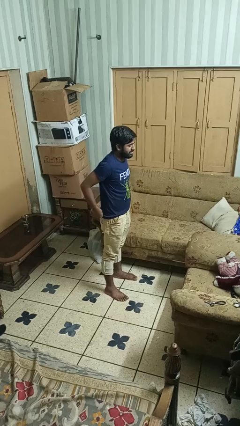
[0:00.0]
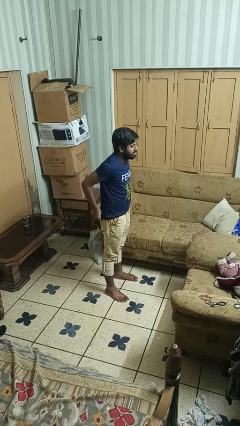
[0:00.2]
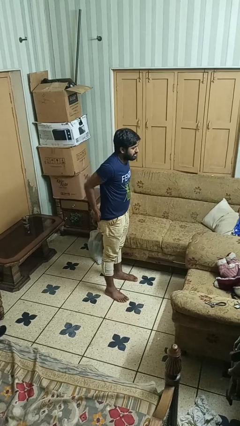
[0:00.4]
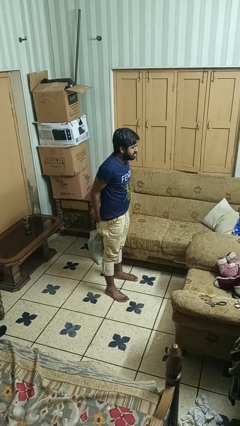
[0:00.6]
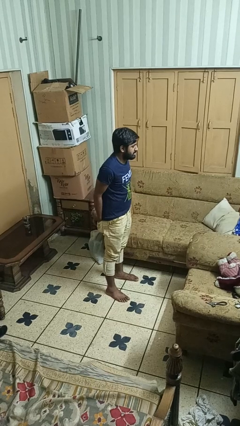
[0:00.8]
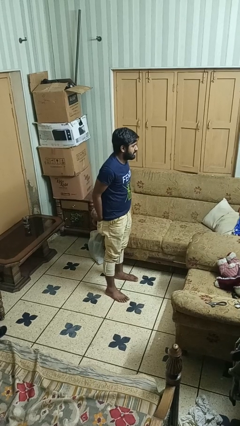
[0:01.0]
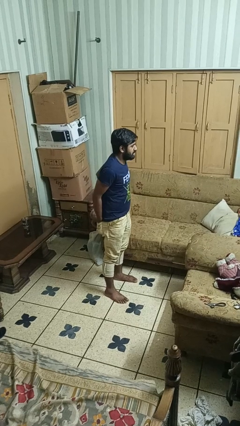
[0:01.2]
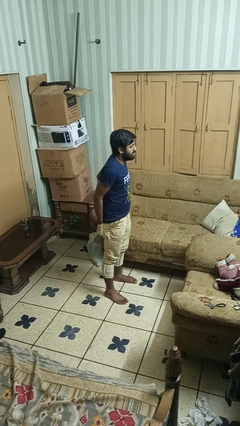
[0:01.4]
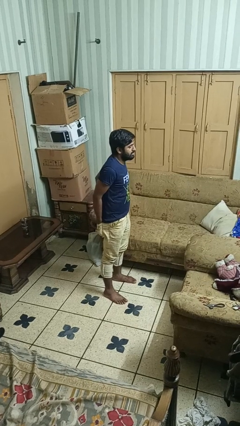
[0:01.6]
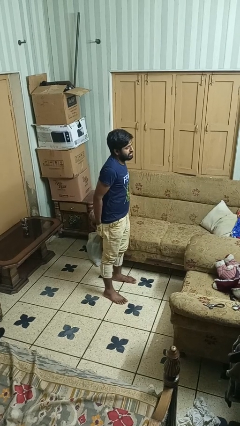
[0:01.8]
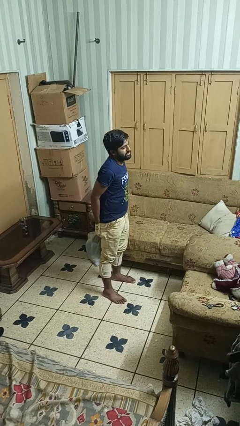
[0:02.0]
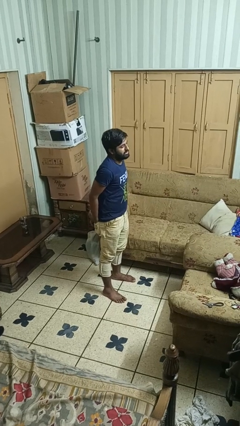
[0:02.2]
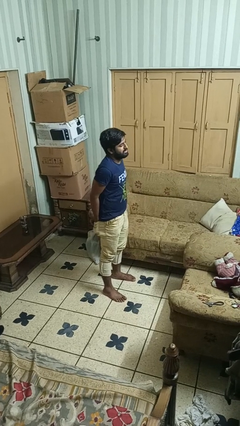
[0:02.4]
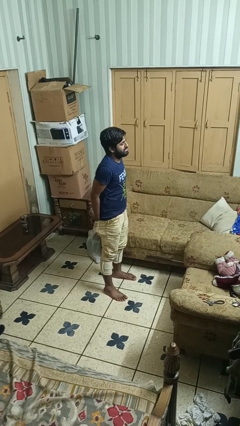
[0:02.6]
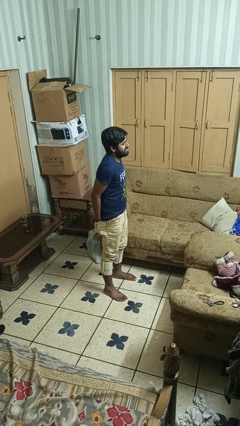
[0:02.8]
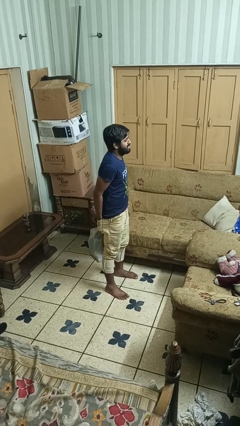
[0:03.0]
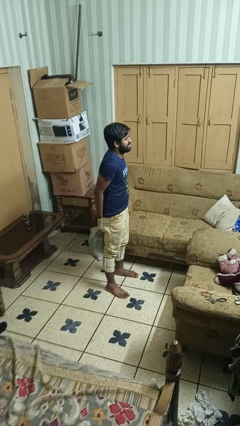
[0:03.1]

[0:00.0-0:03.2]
person puts hands in back pockets

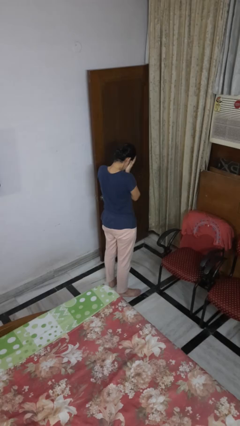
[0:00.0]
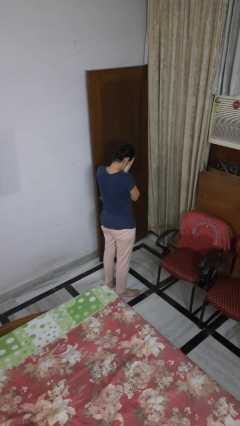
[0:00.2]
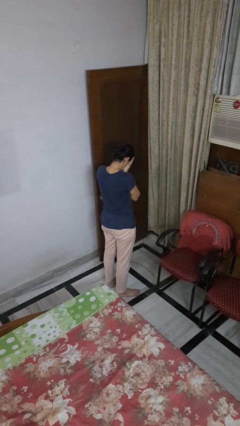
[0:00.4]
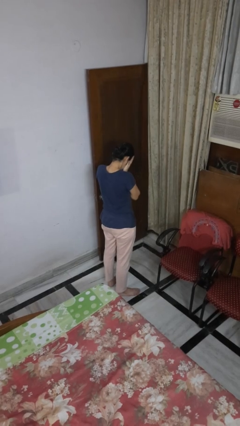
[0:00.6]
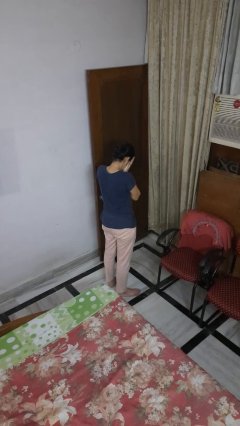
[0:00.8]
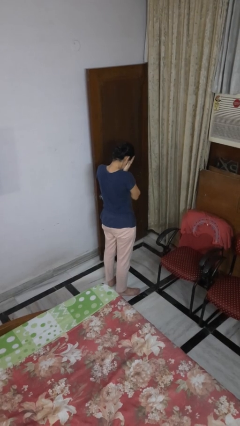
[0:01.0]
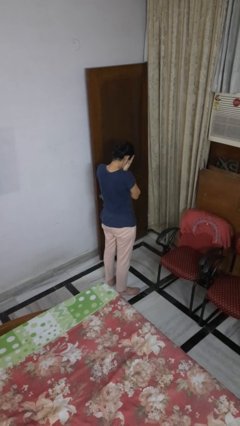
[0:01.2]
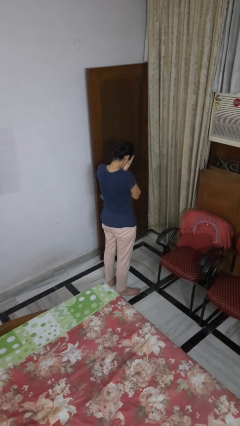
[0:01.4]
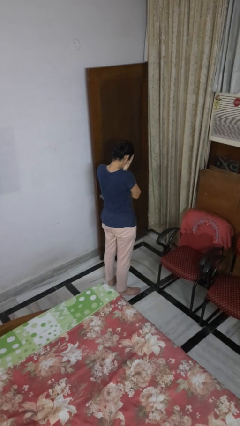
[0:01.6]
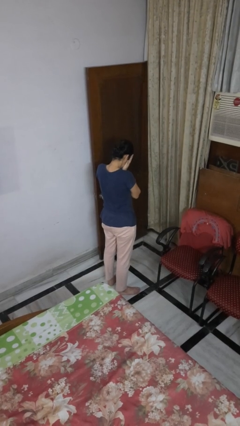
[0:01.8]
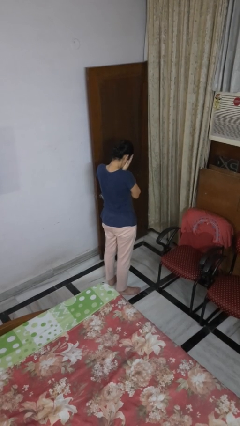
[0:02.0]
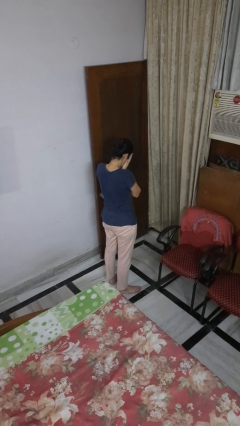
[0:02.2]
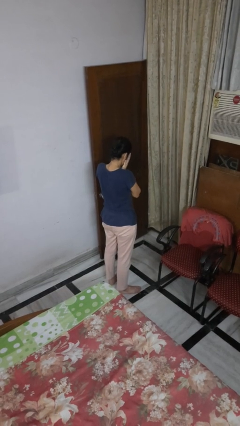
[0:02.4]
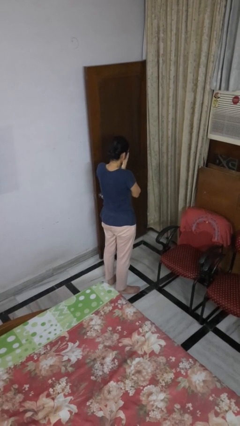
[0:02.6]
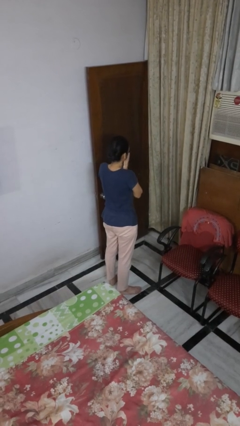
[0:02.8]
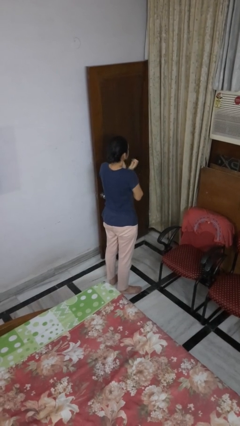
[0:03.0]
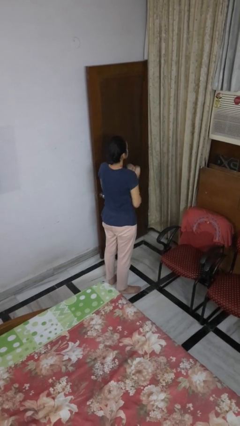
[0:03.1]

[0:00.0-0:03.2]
person covers face with hands

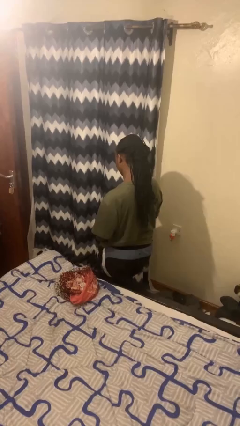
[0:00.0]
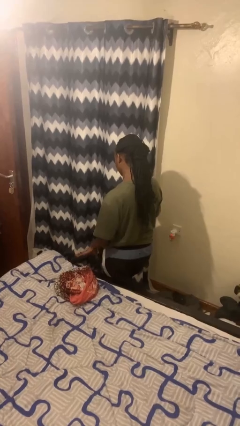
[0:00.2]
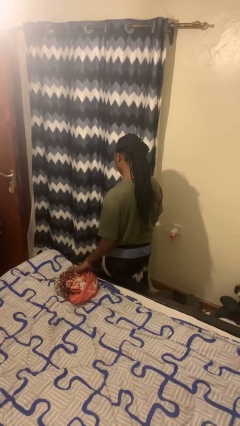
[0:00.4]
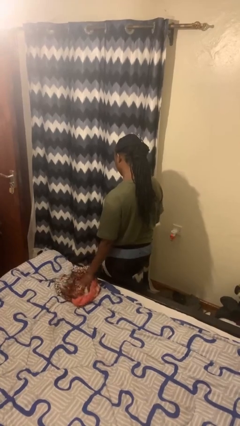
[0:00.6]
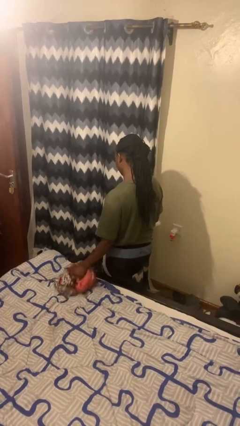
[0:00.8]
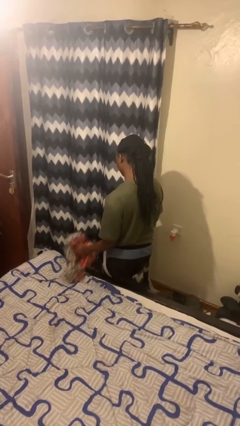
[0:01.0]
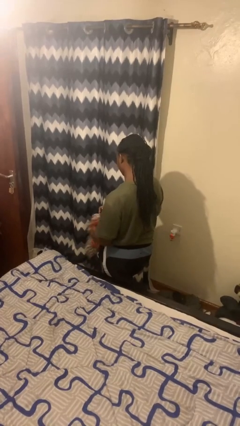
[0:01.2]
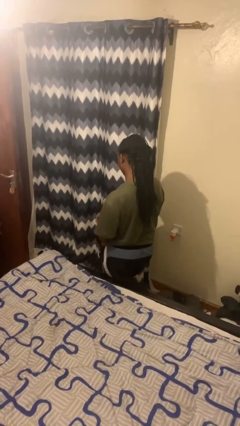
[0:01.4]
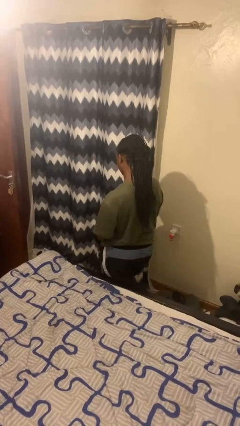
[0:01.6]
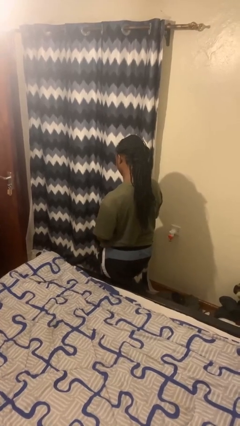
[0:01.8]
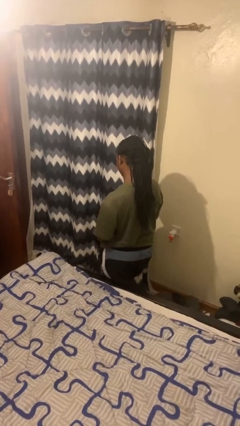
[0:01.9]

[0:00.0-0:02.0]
person picks up object from bed

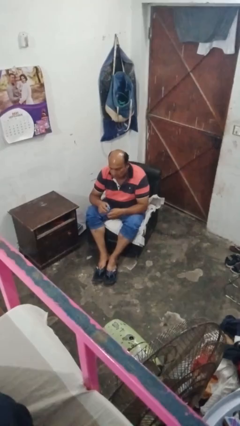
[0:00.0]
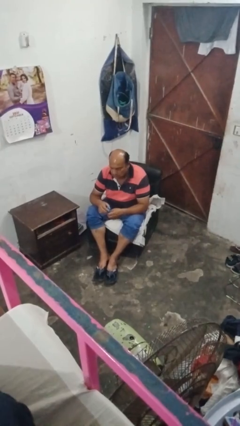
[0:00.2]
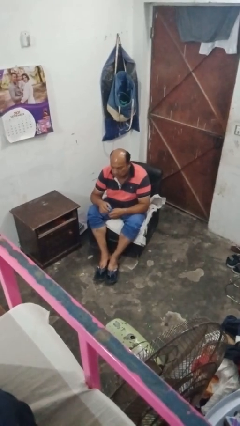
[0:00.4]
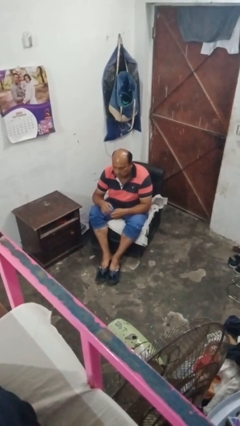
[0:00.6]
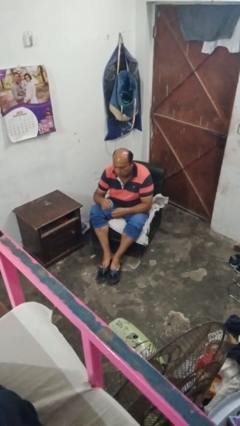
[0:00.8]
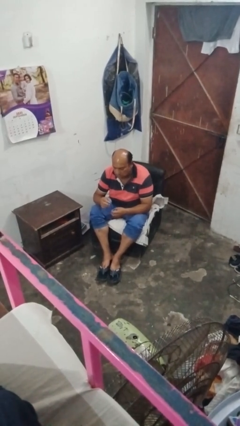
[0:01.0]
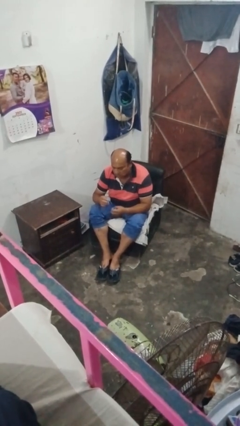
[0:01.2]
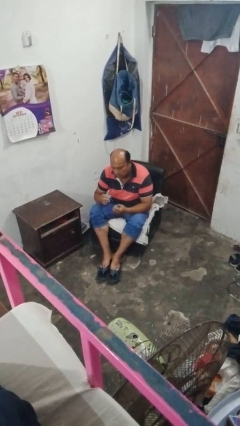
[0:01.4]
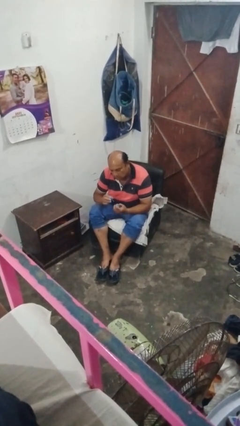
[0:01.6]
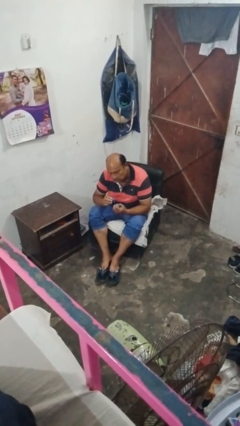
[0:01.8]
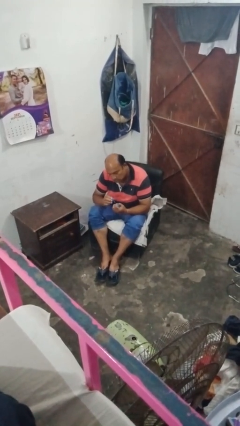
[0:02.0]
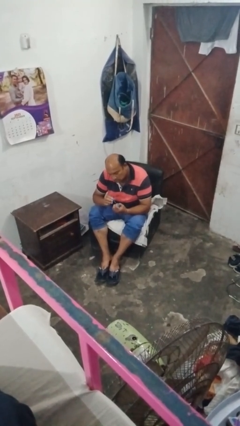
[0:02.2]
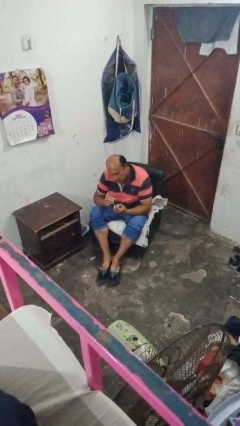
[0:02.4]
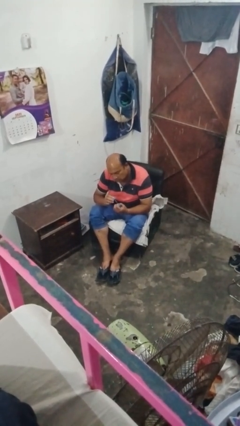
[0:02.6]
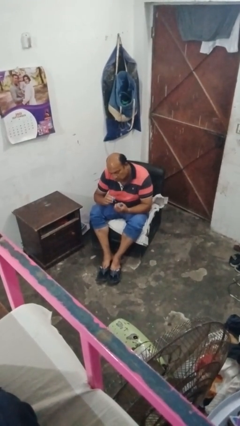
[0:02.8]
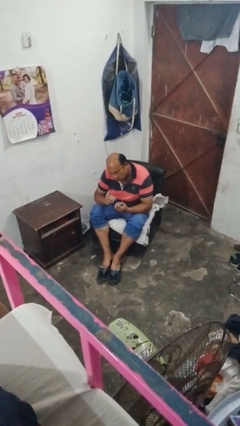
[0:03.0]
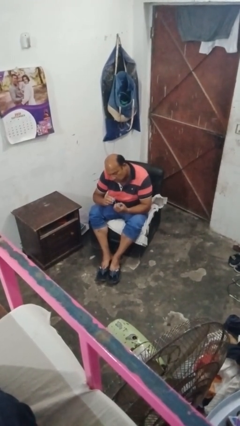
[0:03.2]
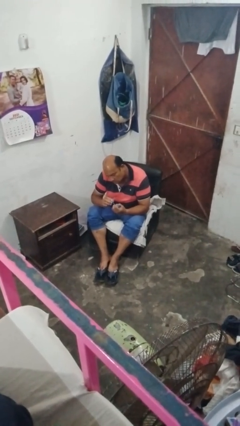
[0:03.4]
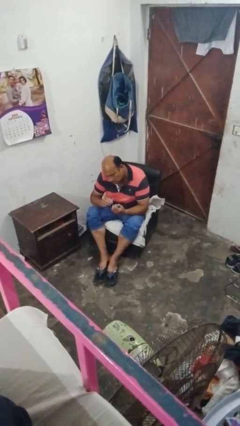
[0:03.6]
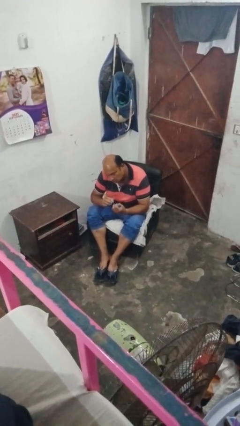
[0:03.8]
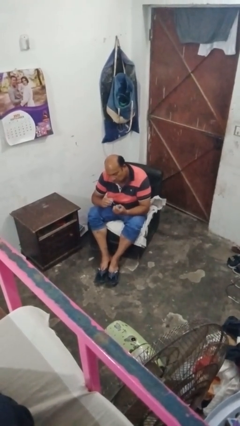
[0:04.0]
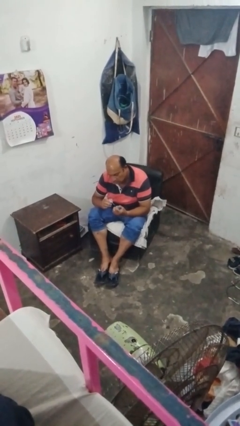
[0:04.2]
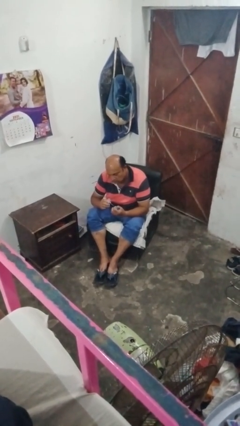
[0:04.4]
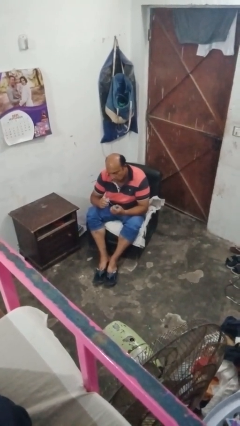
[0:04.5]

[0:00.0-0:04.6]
person paints fingernails

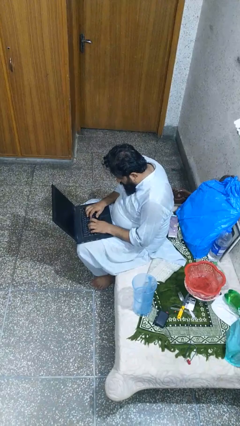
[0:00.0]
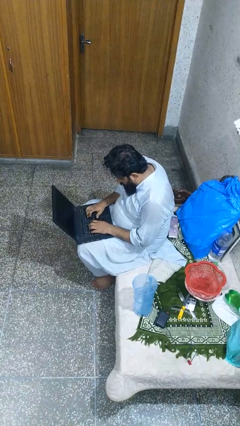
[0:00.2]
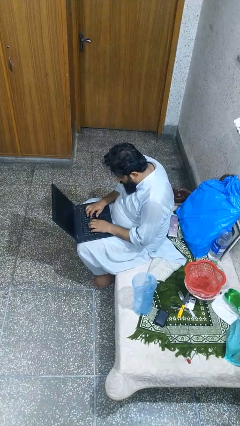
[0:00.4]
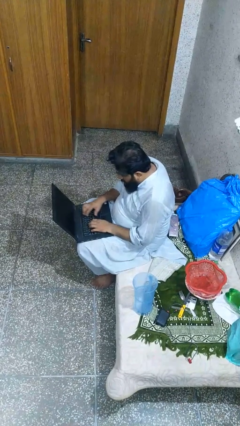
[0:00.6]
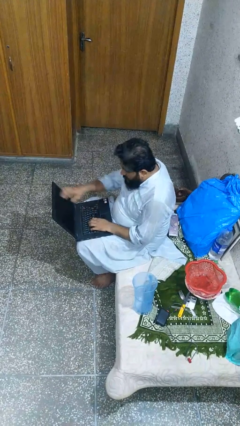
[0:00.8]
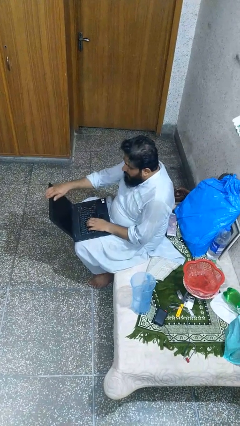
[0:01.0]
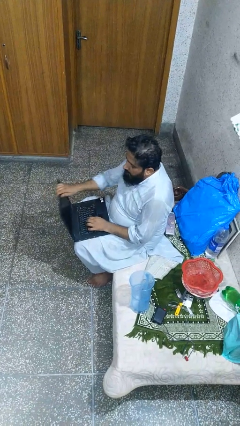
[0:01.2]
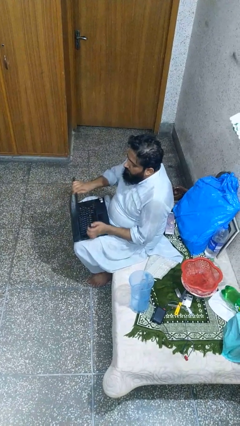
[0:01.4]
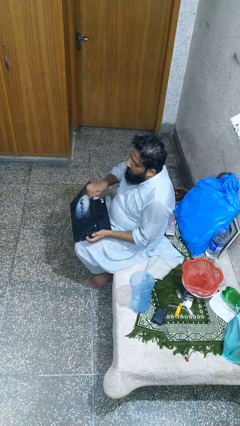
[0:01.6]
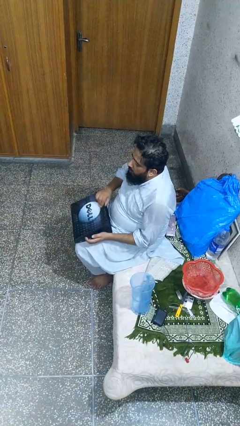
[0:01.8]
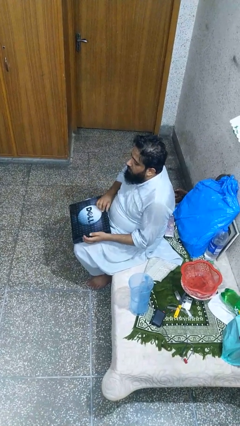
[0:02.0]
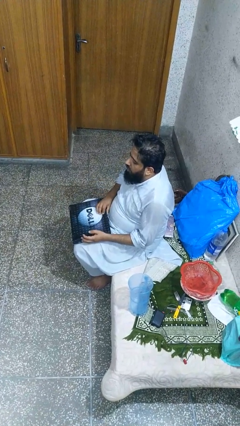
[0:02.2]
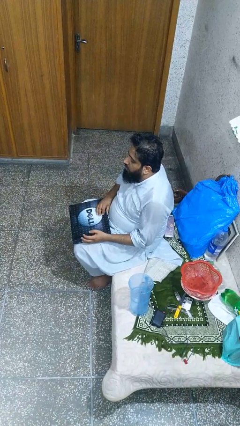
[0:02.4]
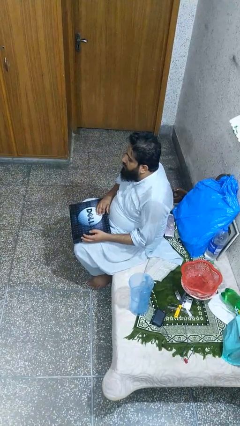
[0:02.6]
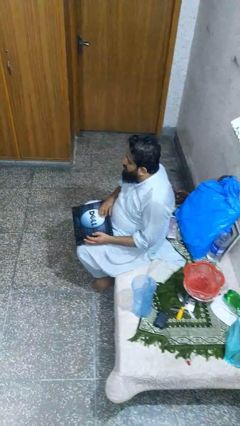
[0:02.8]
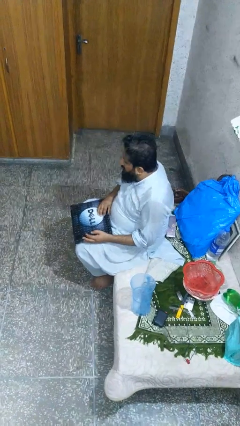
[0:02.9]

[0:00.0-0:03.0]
person closes laptop

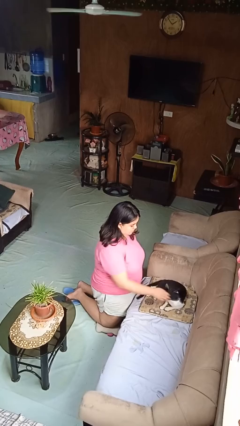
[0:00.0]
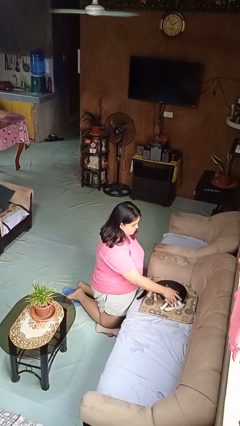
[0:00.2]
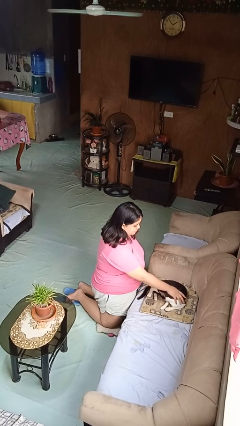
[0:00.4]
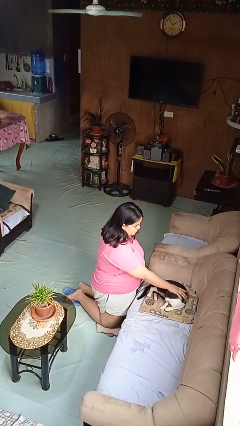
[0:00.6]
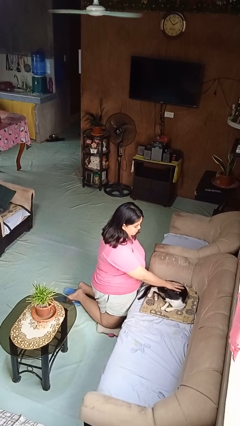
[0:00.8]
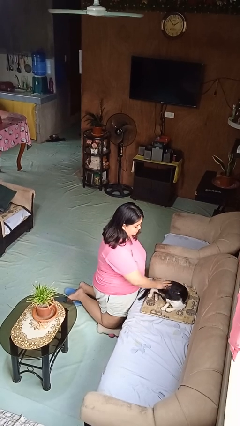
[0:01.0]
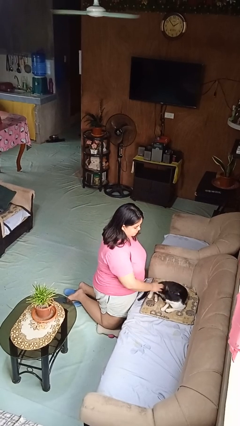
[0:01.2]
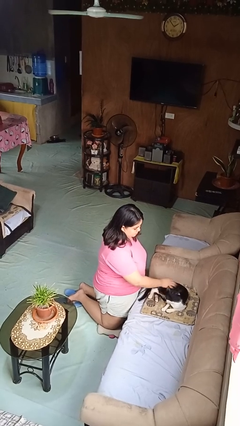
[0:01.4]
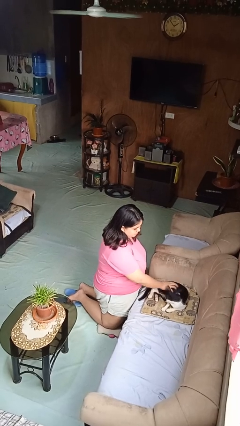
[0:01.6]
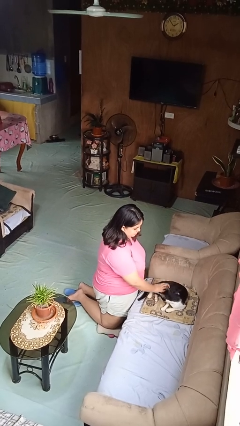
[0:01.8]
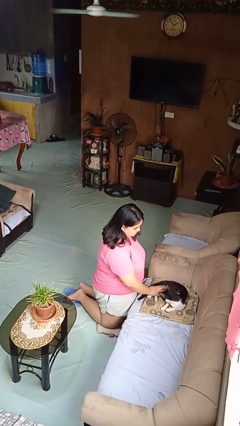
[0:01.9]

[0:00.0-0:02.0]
person pets cat
